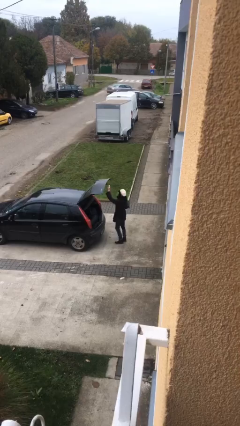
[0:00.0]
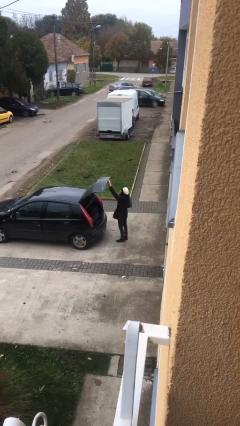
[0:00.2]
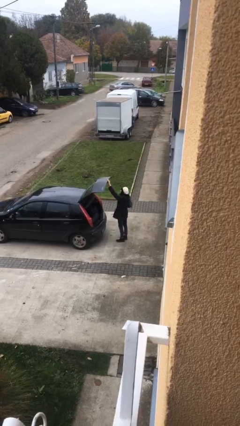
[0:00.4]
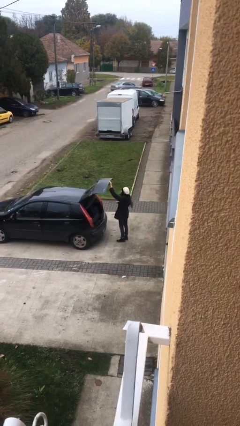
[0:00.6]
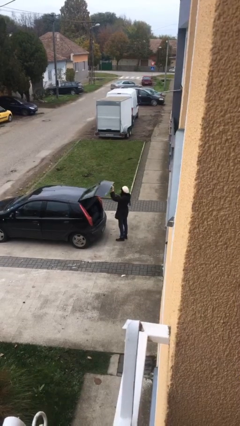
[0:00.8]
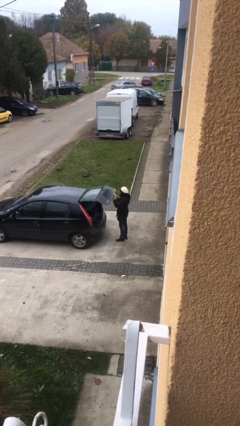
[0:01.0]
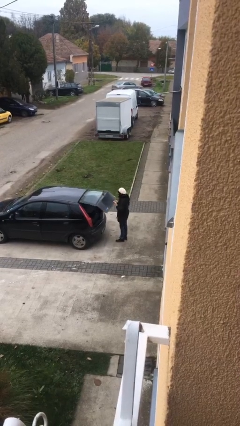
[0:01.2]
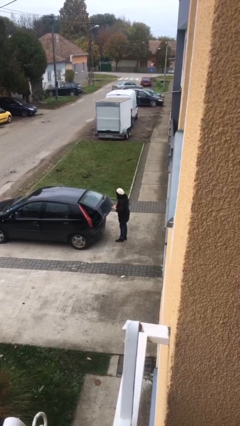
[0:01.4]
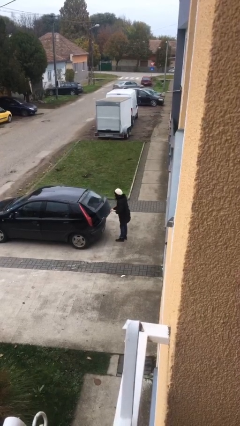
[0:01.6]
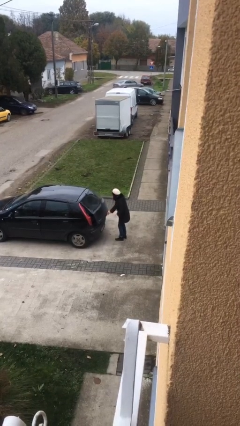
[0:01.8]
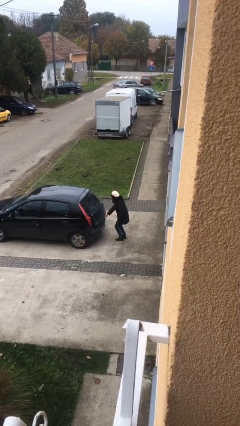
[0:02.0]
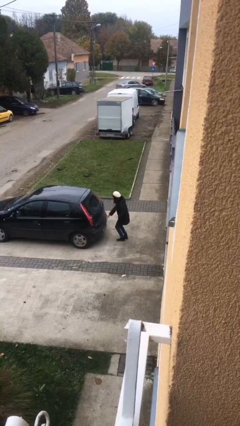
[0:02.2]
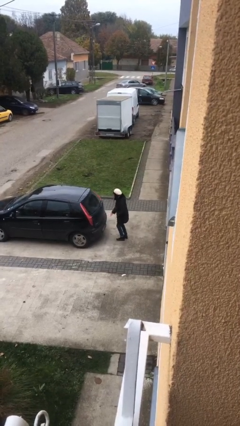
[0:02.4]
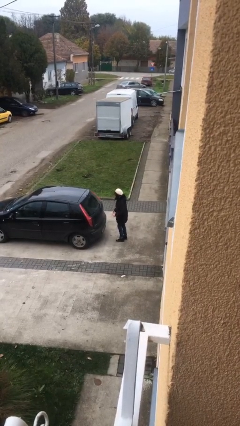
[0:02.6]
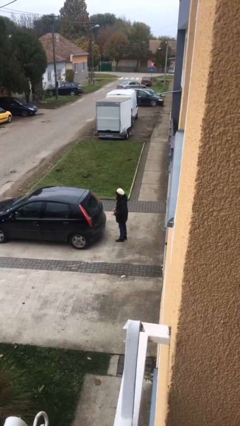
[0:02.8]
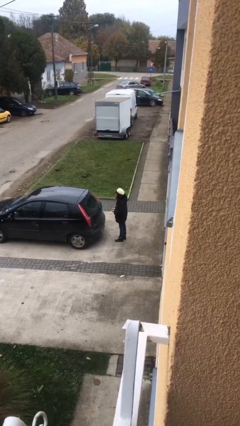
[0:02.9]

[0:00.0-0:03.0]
person closes car trunk

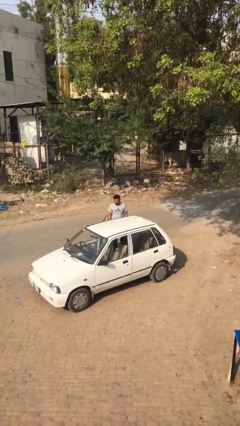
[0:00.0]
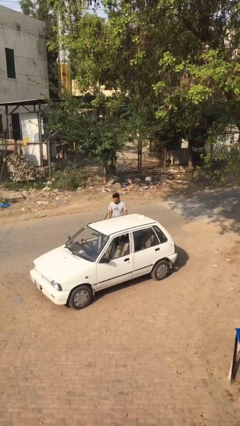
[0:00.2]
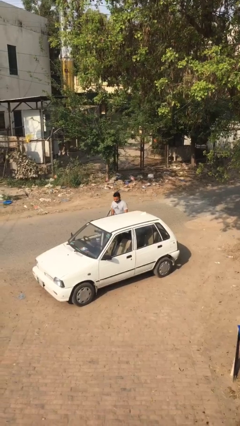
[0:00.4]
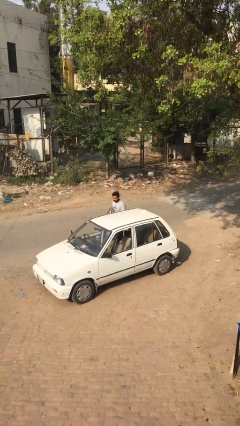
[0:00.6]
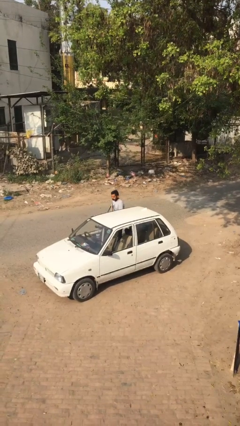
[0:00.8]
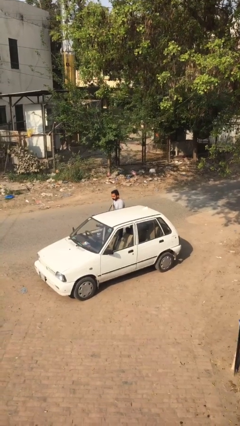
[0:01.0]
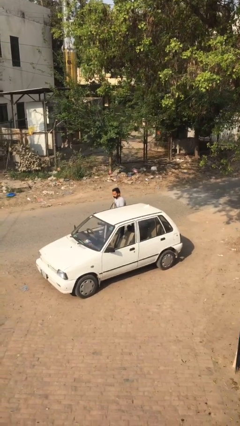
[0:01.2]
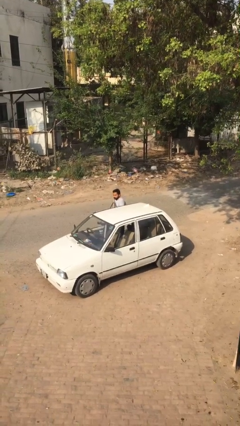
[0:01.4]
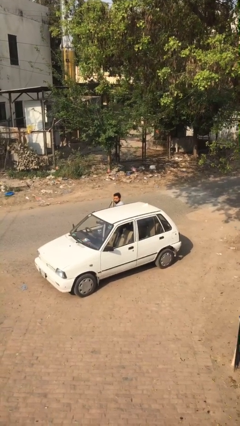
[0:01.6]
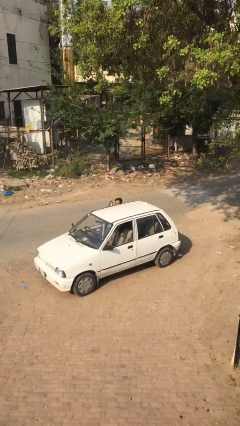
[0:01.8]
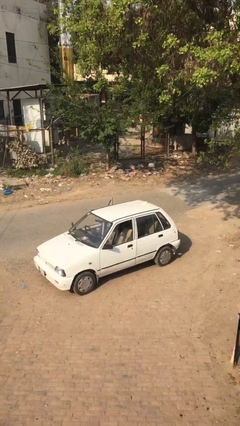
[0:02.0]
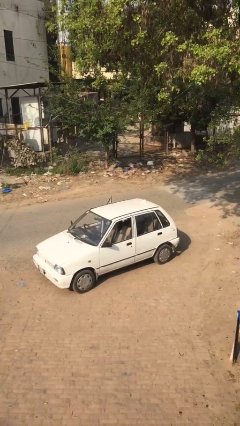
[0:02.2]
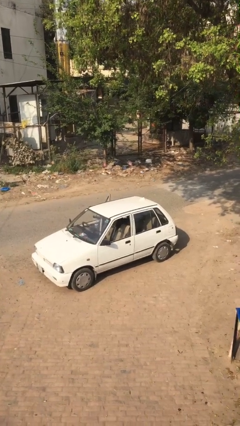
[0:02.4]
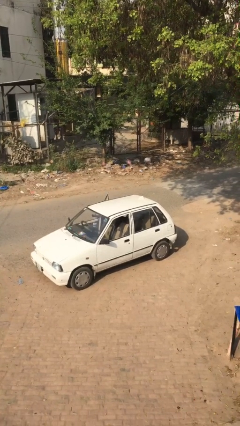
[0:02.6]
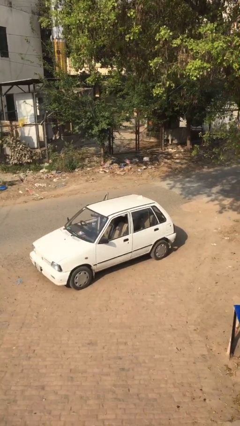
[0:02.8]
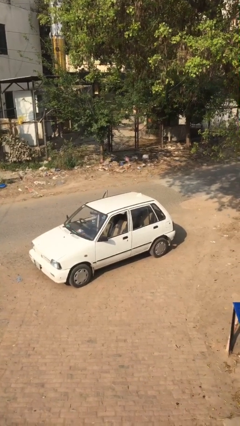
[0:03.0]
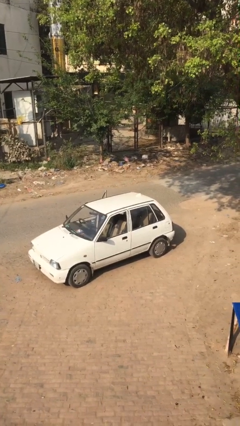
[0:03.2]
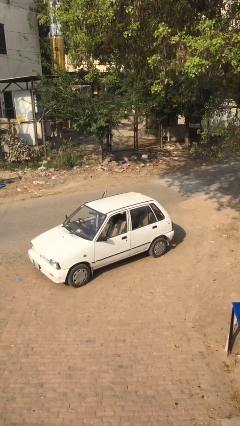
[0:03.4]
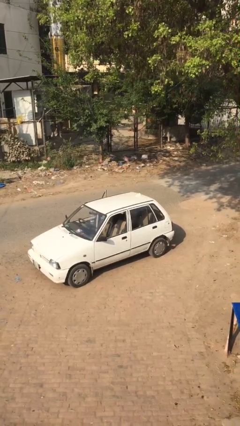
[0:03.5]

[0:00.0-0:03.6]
person enters car

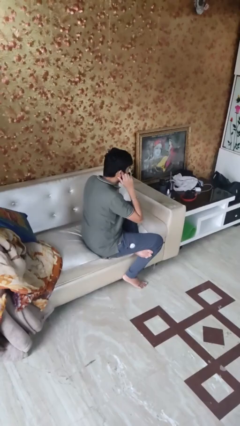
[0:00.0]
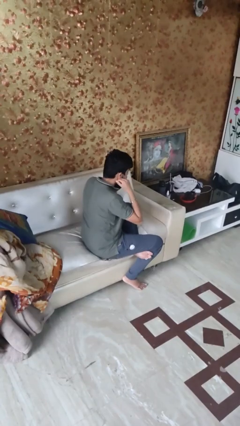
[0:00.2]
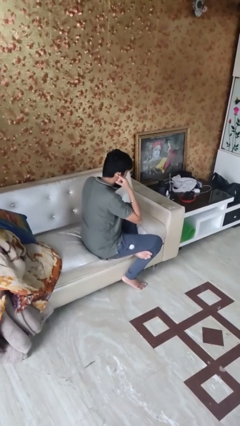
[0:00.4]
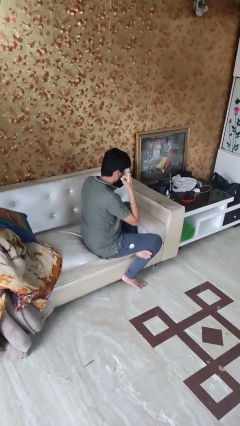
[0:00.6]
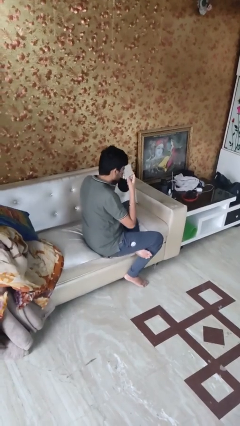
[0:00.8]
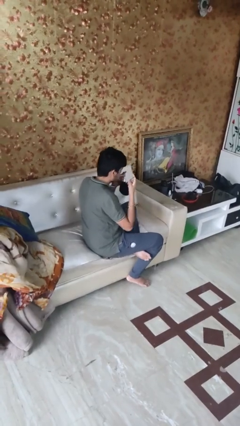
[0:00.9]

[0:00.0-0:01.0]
person takes off facemask

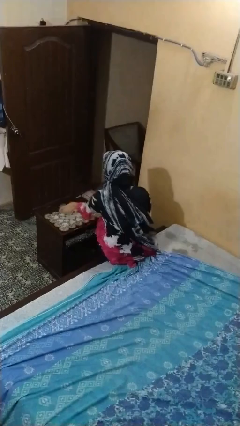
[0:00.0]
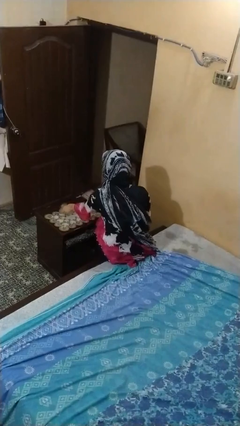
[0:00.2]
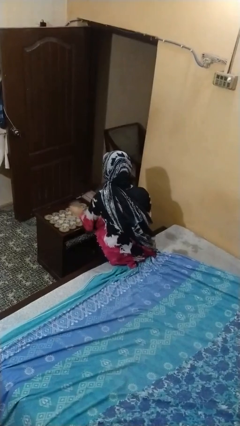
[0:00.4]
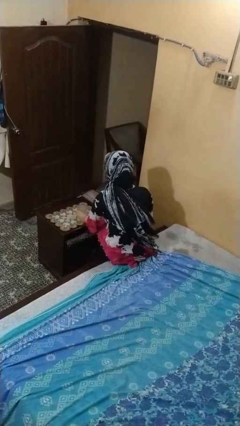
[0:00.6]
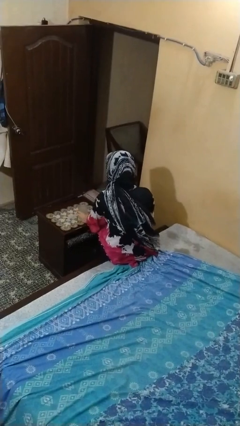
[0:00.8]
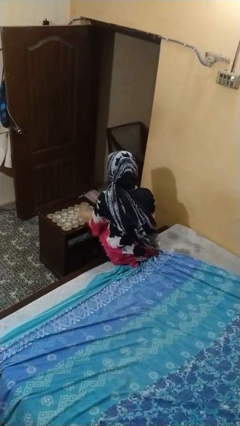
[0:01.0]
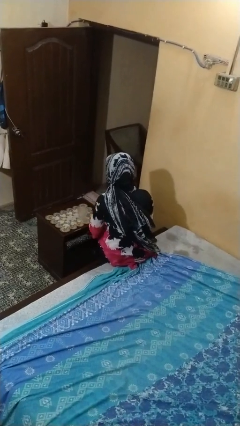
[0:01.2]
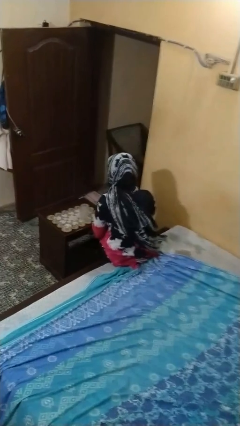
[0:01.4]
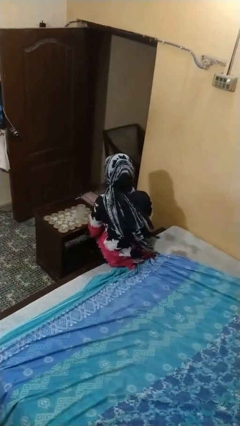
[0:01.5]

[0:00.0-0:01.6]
person sets upright glass

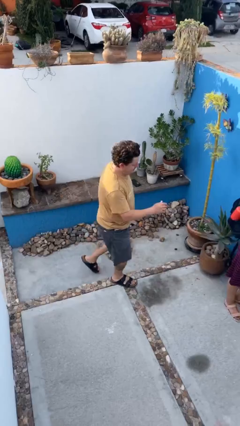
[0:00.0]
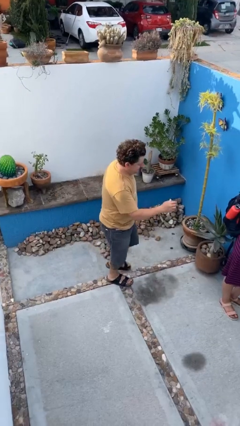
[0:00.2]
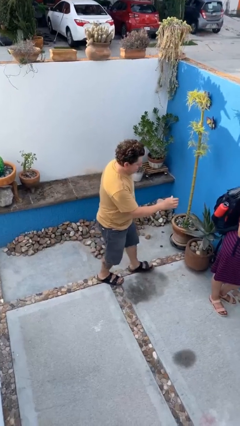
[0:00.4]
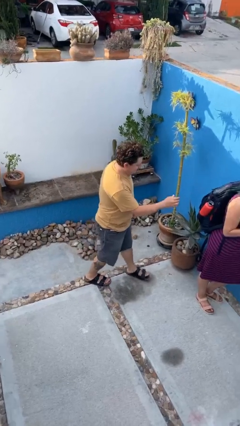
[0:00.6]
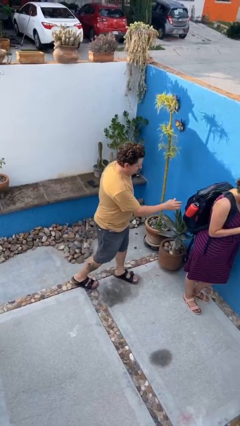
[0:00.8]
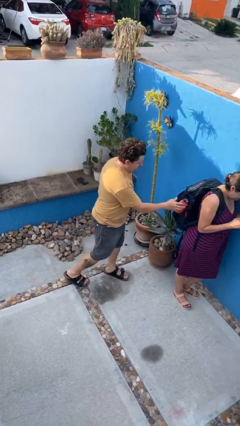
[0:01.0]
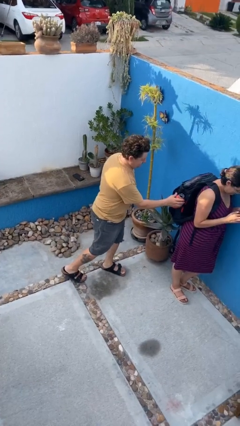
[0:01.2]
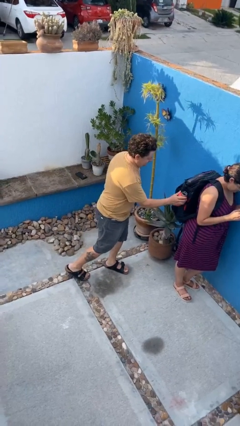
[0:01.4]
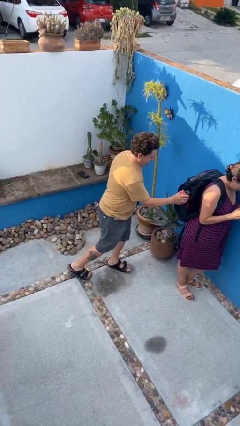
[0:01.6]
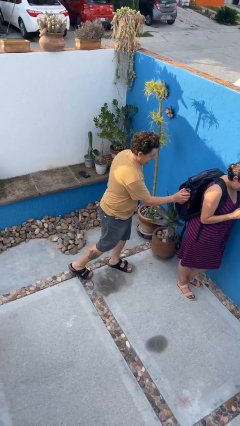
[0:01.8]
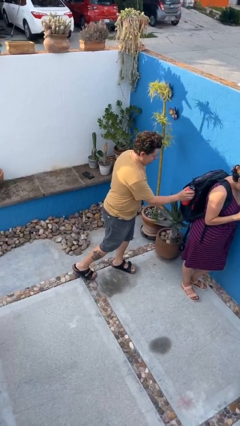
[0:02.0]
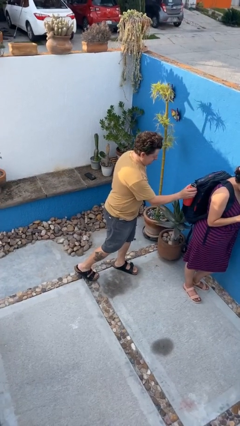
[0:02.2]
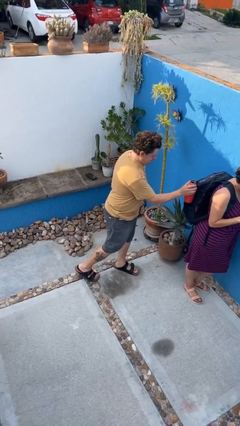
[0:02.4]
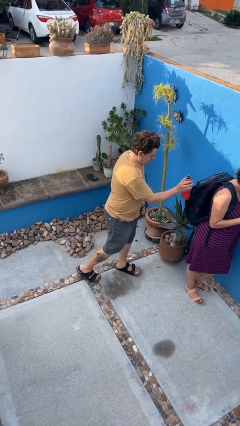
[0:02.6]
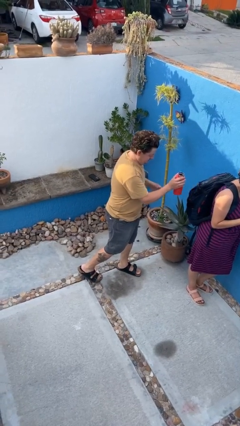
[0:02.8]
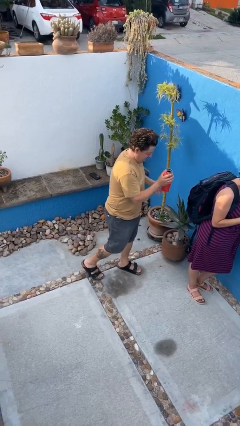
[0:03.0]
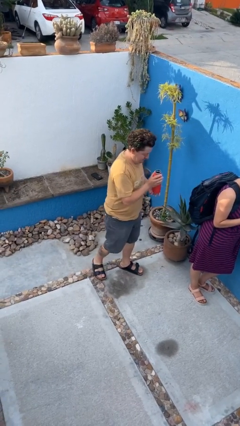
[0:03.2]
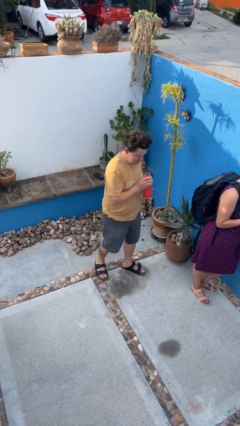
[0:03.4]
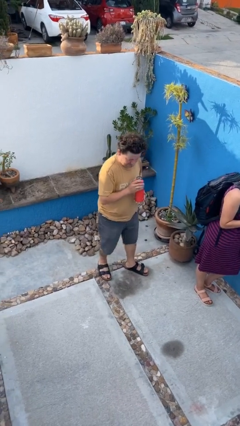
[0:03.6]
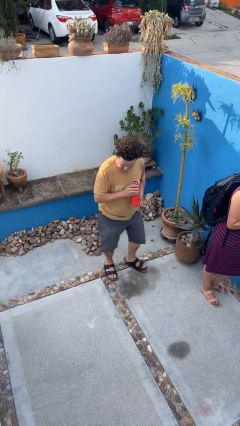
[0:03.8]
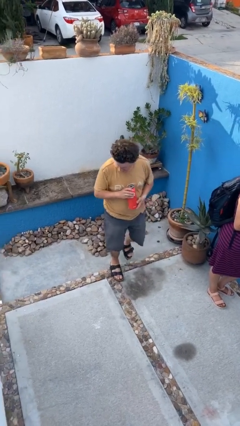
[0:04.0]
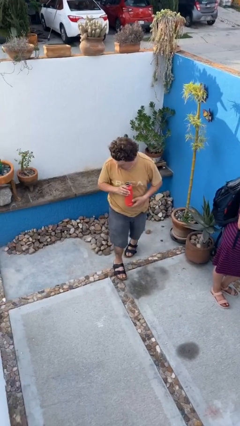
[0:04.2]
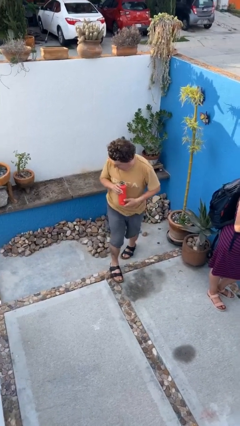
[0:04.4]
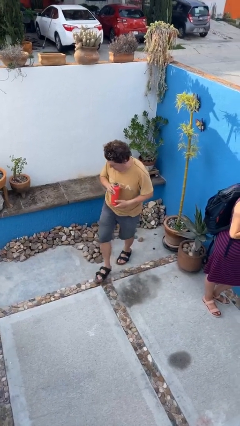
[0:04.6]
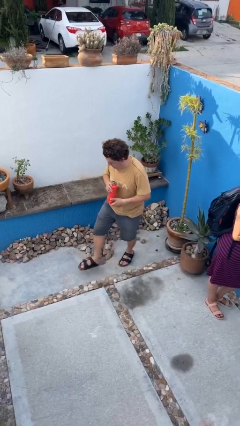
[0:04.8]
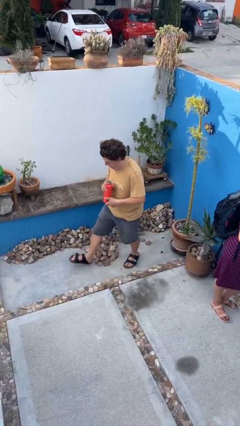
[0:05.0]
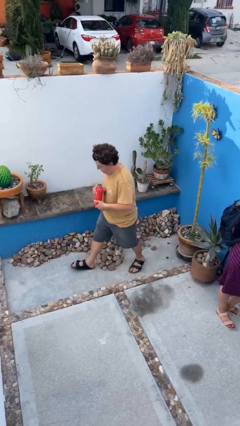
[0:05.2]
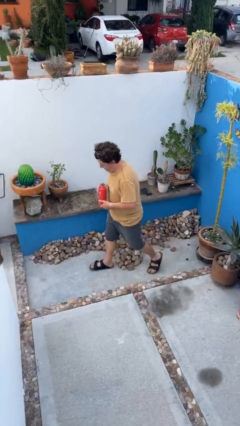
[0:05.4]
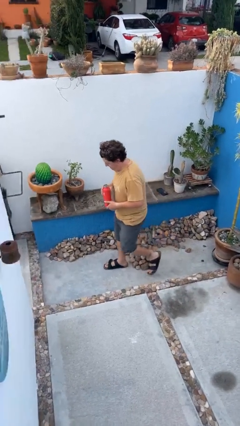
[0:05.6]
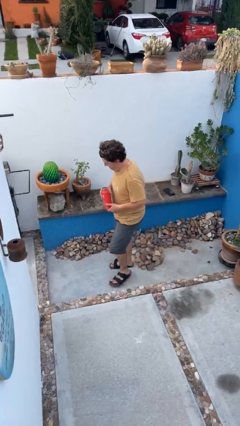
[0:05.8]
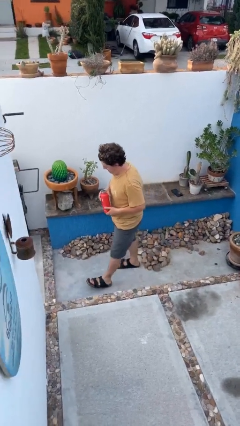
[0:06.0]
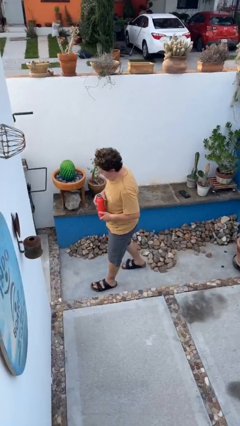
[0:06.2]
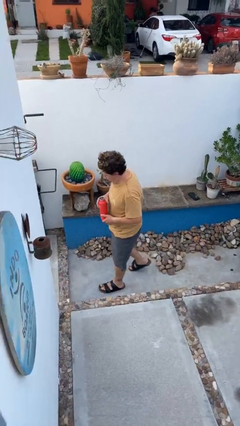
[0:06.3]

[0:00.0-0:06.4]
person steals object from person

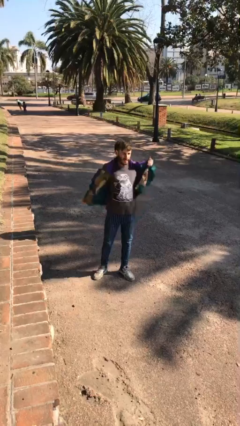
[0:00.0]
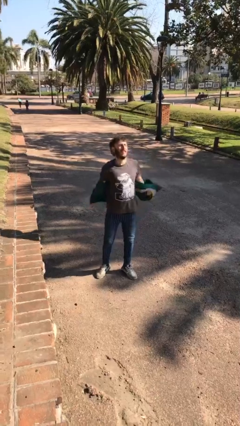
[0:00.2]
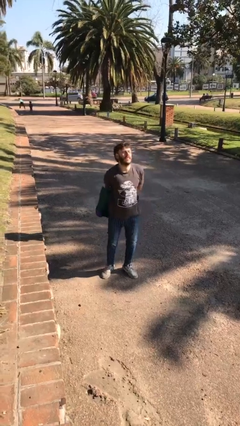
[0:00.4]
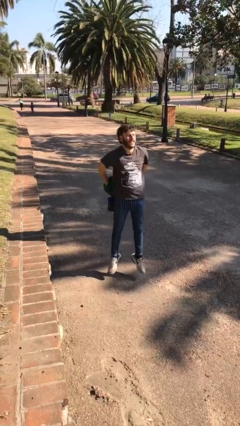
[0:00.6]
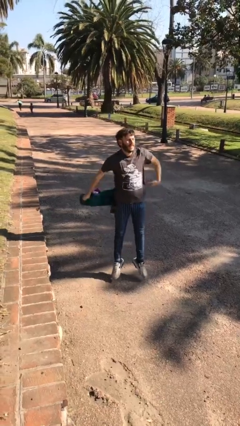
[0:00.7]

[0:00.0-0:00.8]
person takes off jacket

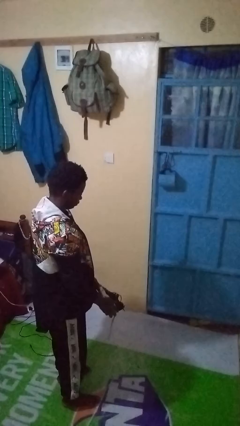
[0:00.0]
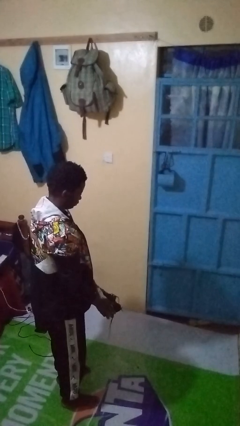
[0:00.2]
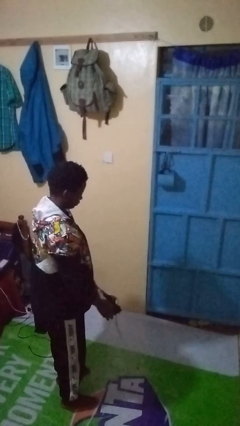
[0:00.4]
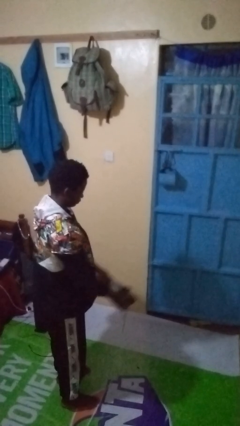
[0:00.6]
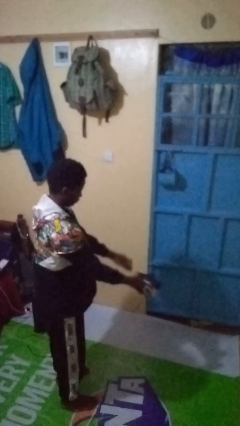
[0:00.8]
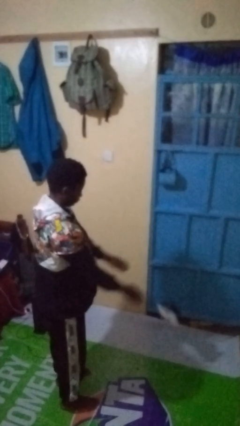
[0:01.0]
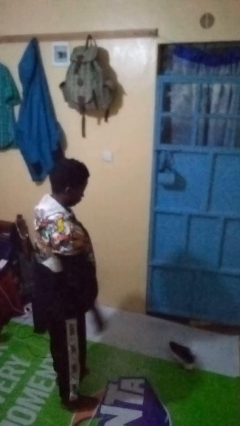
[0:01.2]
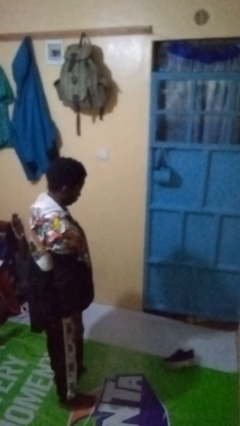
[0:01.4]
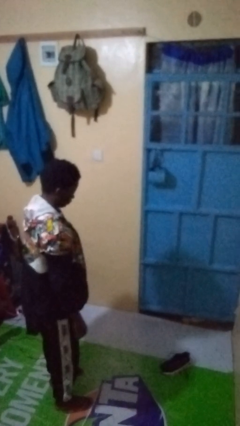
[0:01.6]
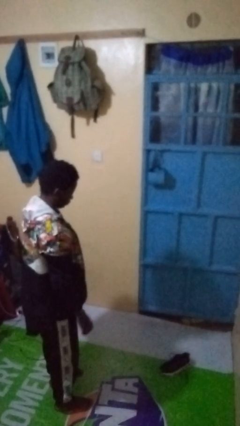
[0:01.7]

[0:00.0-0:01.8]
person throws object to ground
